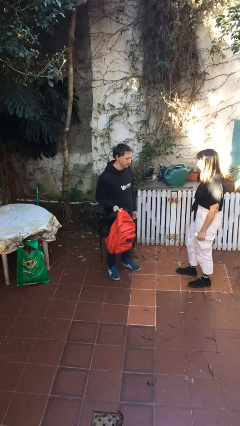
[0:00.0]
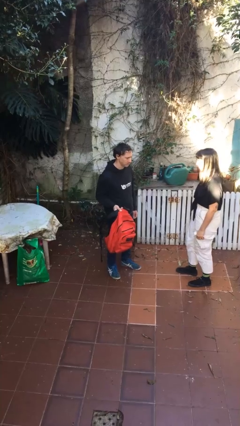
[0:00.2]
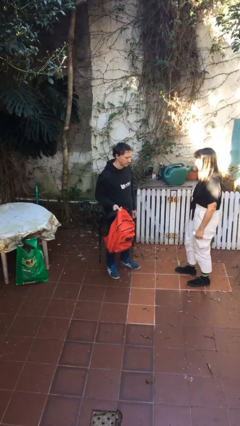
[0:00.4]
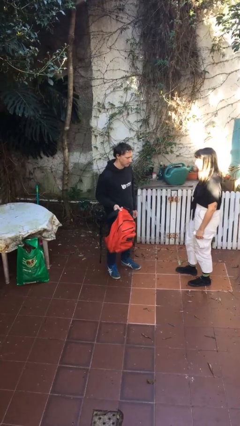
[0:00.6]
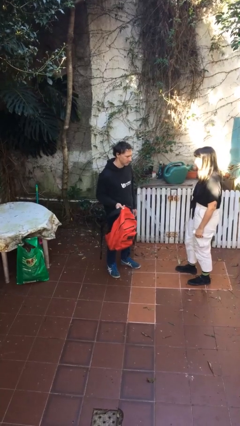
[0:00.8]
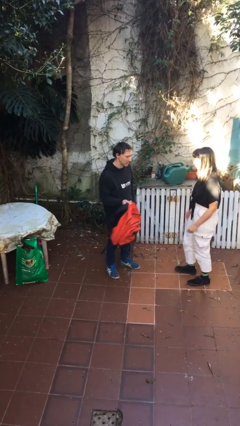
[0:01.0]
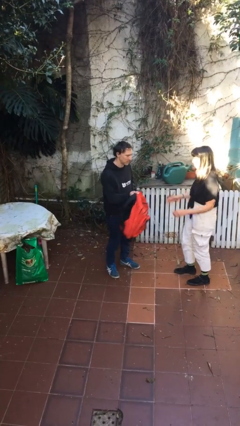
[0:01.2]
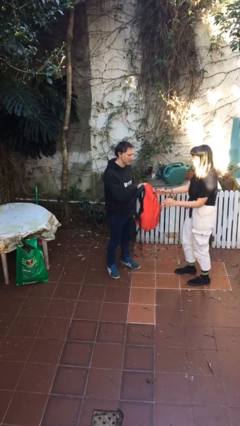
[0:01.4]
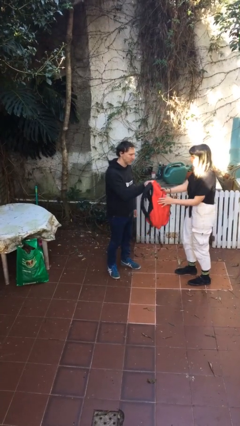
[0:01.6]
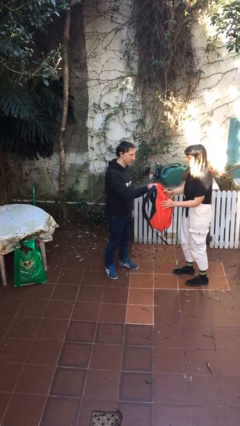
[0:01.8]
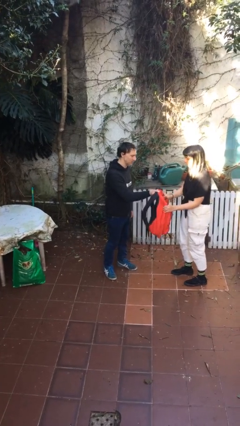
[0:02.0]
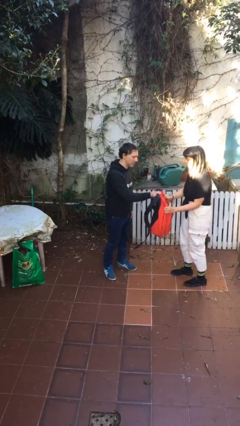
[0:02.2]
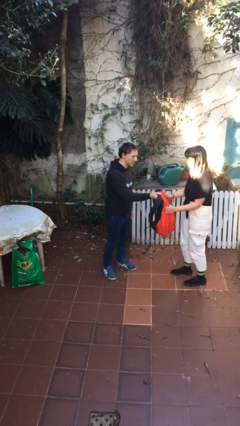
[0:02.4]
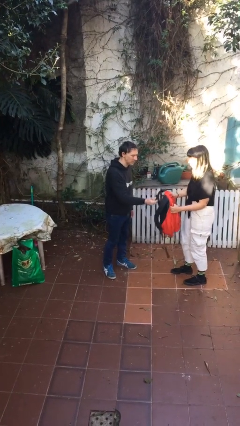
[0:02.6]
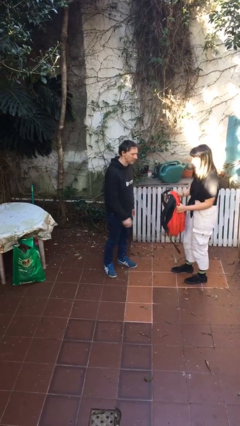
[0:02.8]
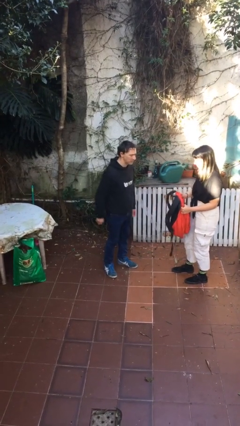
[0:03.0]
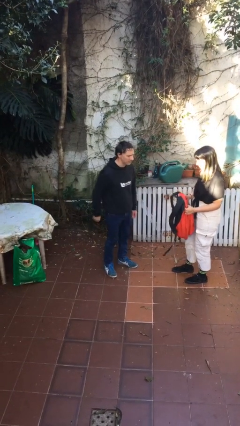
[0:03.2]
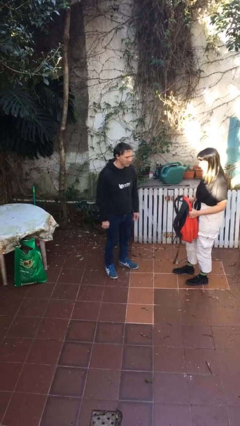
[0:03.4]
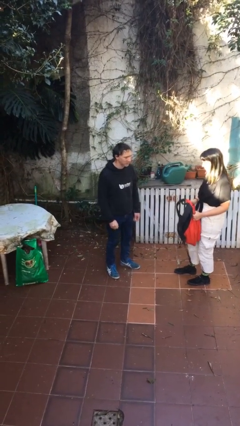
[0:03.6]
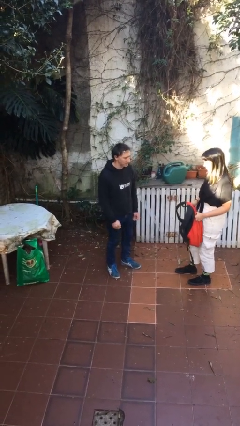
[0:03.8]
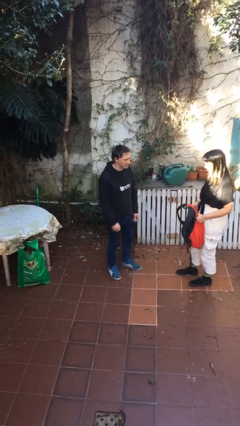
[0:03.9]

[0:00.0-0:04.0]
person transfers object to person

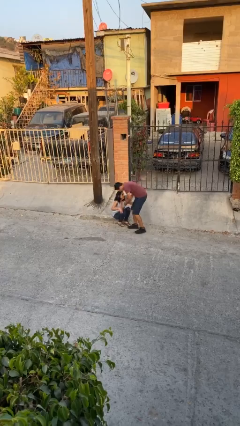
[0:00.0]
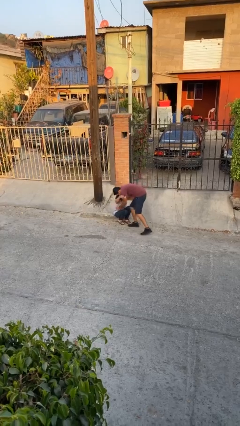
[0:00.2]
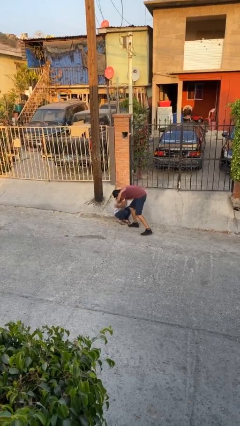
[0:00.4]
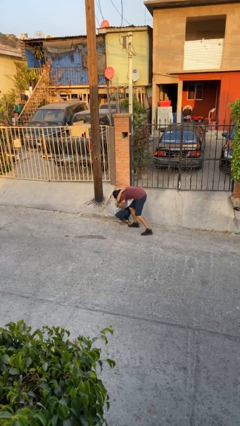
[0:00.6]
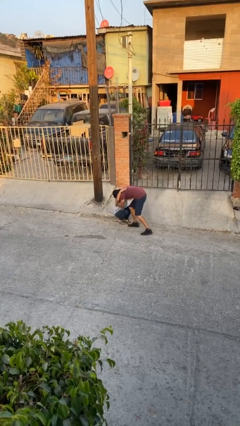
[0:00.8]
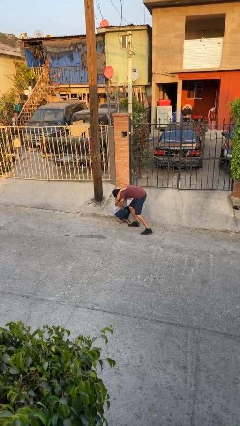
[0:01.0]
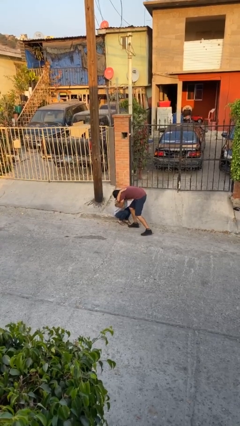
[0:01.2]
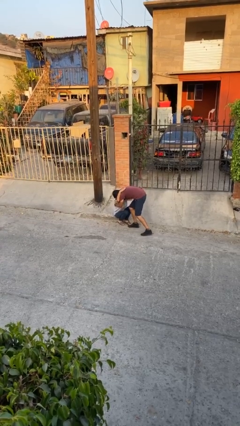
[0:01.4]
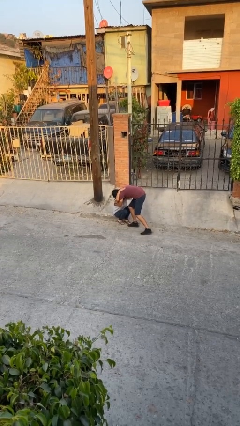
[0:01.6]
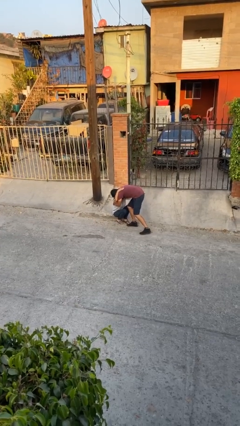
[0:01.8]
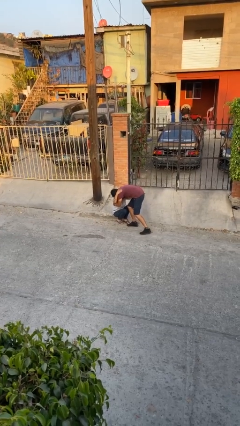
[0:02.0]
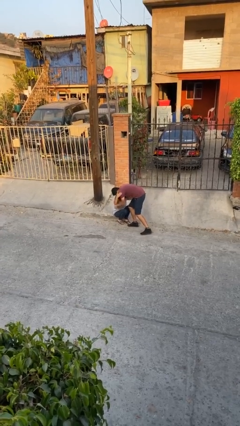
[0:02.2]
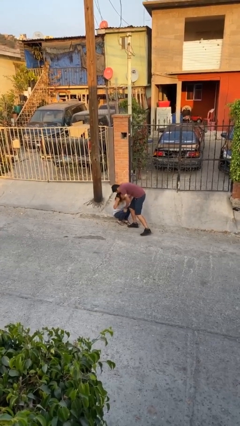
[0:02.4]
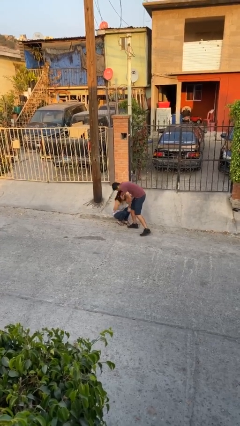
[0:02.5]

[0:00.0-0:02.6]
person embraces person

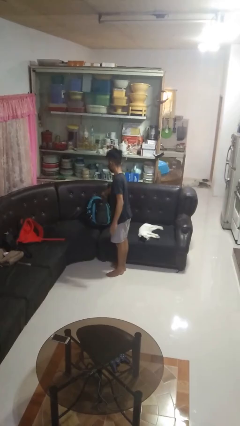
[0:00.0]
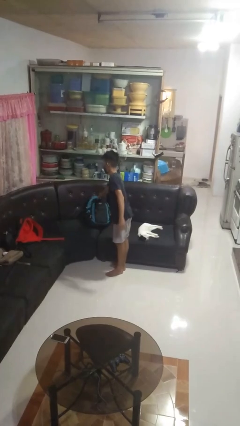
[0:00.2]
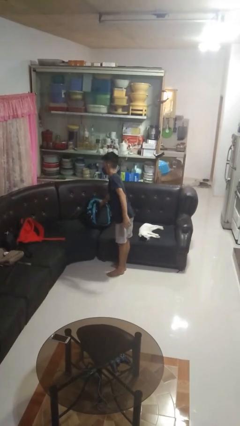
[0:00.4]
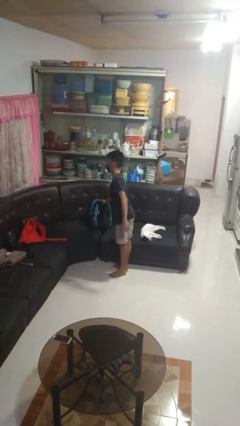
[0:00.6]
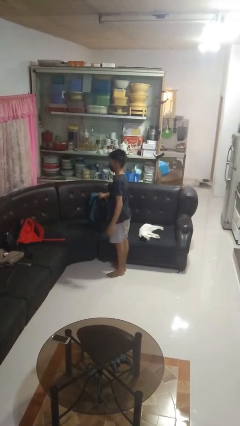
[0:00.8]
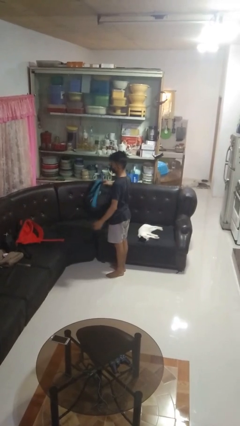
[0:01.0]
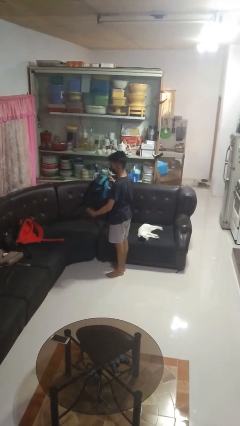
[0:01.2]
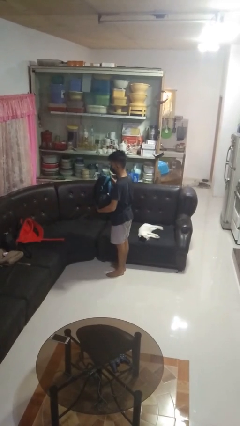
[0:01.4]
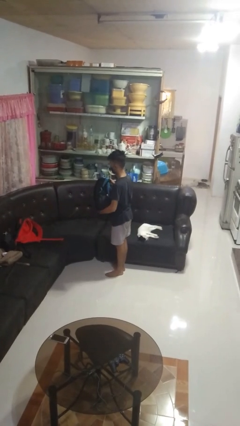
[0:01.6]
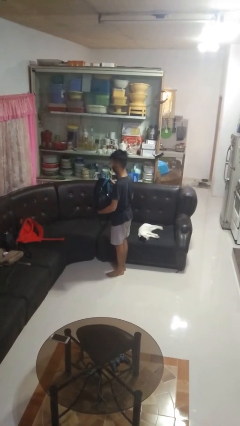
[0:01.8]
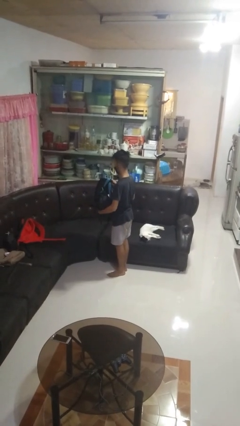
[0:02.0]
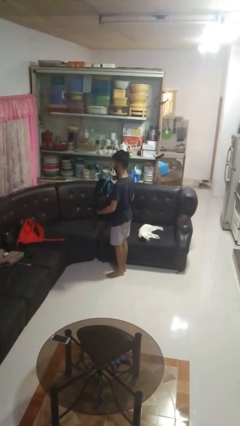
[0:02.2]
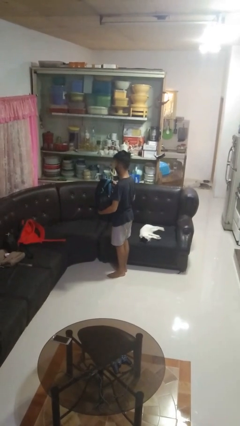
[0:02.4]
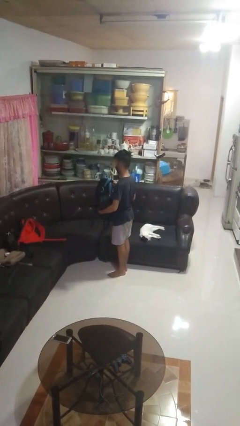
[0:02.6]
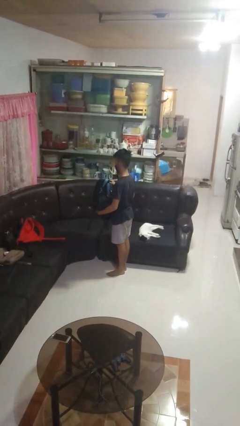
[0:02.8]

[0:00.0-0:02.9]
person picks up object from couch

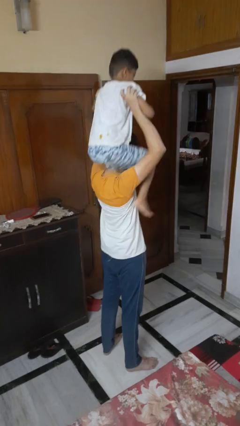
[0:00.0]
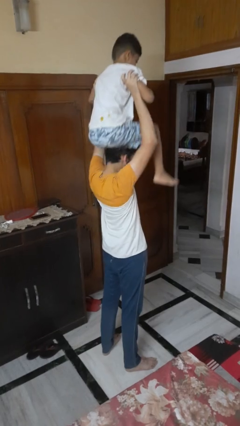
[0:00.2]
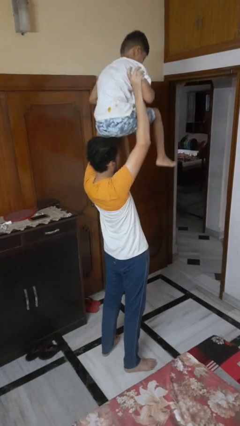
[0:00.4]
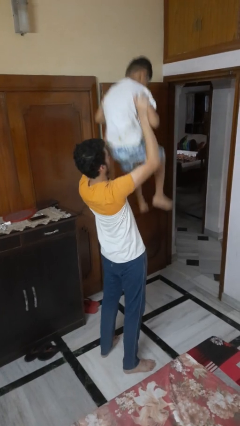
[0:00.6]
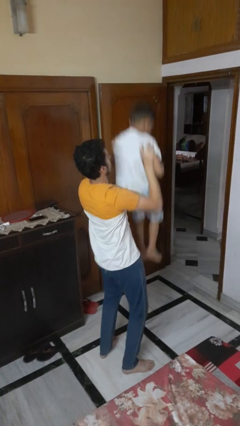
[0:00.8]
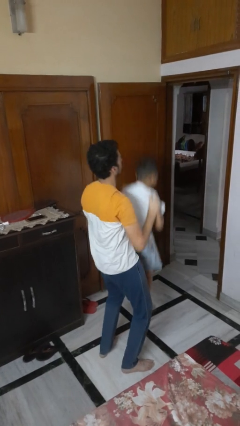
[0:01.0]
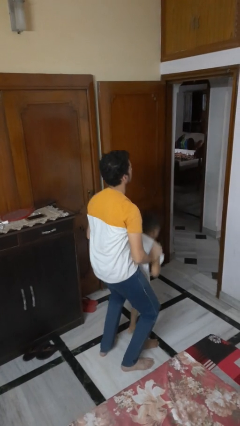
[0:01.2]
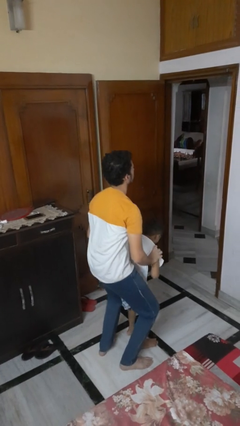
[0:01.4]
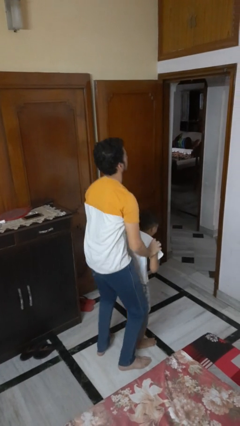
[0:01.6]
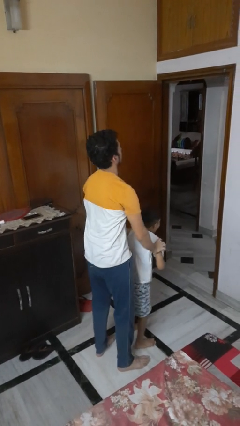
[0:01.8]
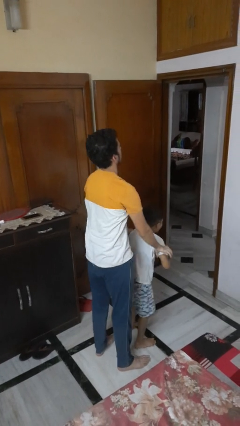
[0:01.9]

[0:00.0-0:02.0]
person puts down person

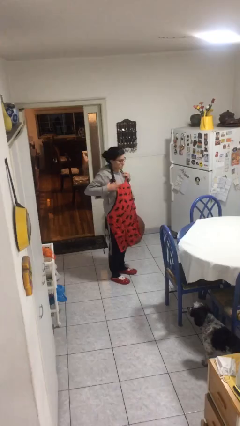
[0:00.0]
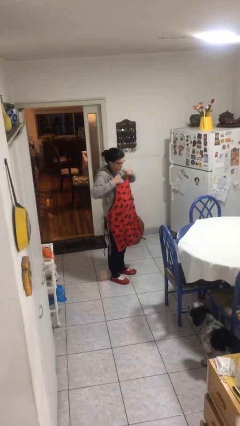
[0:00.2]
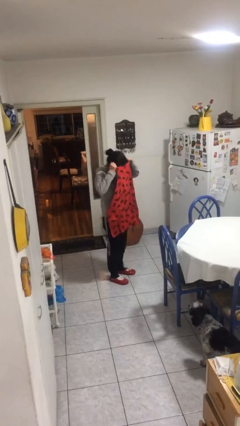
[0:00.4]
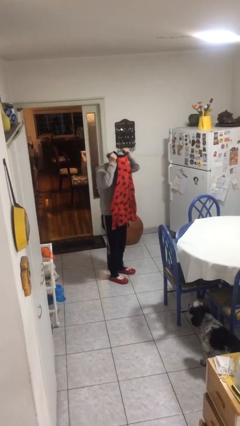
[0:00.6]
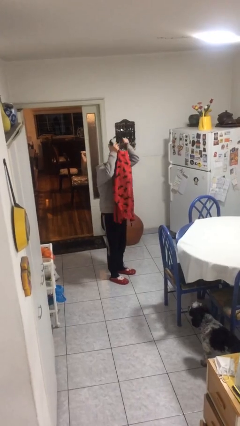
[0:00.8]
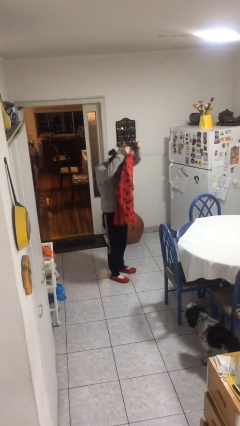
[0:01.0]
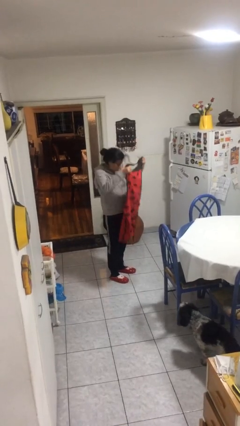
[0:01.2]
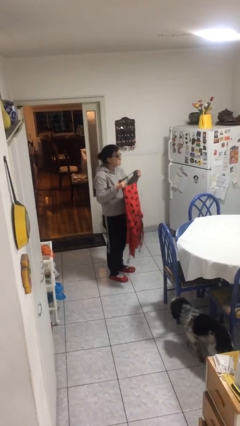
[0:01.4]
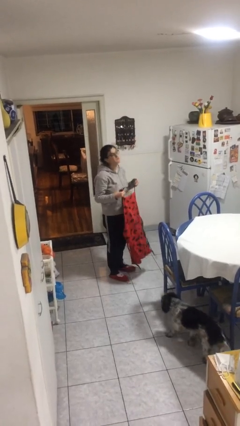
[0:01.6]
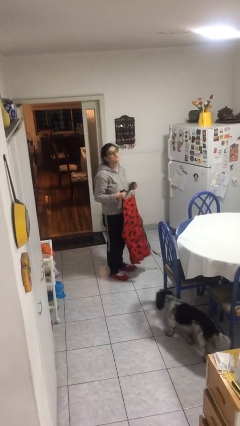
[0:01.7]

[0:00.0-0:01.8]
person takes off apron

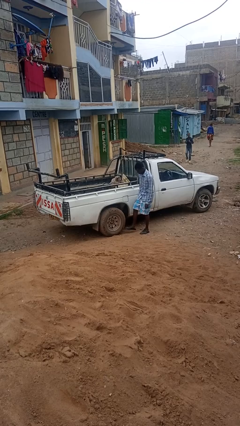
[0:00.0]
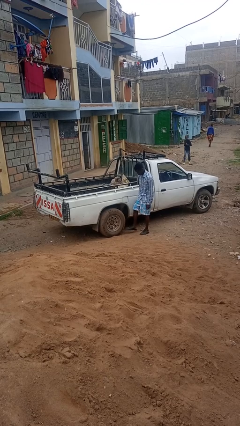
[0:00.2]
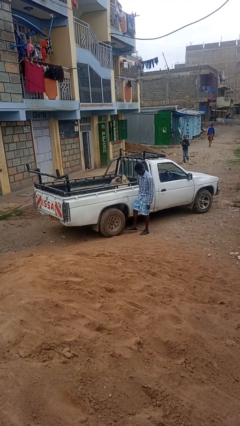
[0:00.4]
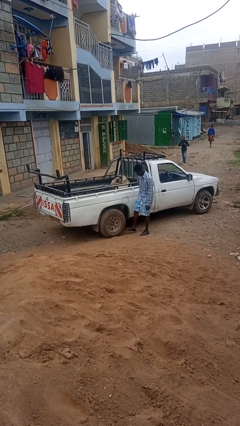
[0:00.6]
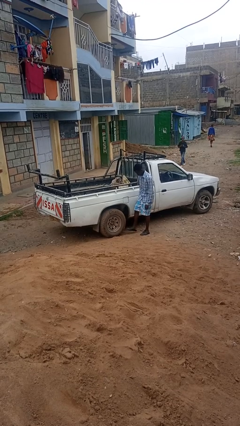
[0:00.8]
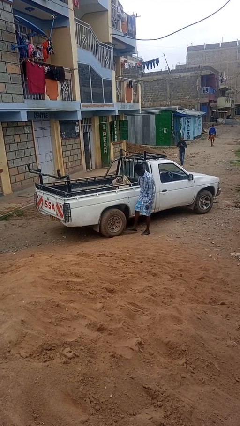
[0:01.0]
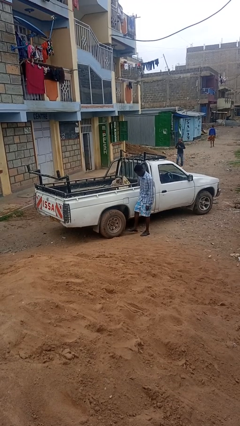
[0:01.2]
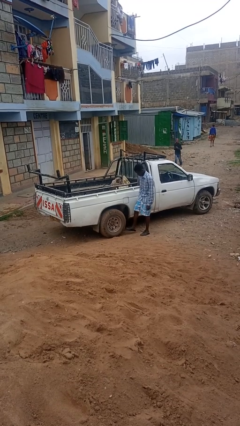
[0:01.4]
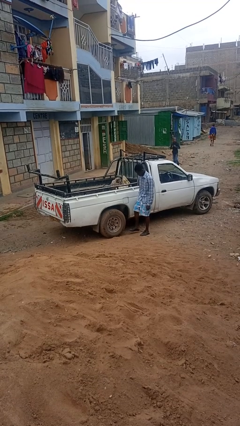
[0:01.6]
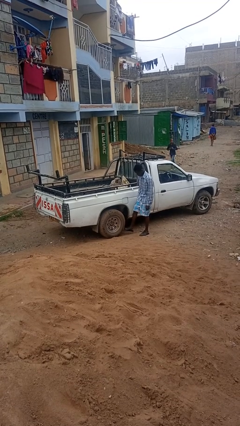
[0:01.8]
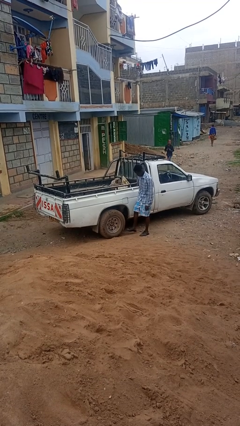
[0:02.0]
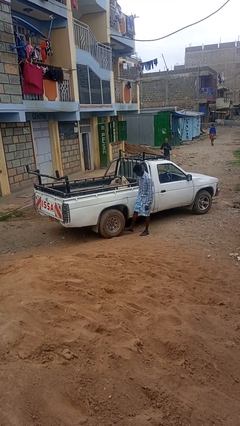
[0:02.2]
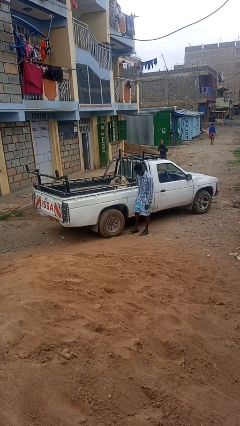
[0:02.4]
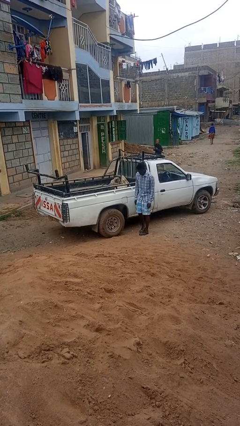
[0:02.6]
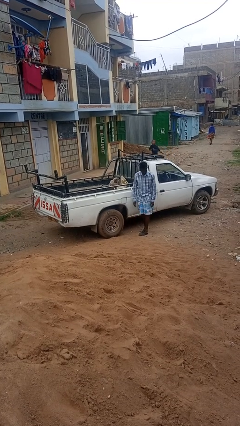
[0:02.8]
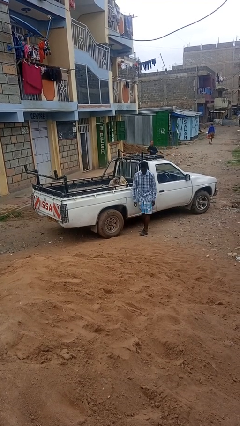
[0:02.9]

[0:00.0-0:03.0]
person kicks car tires

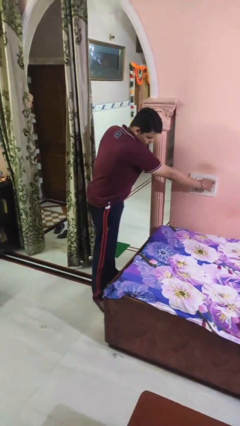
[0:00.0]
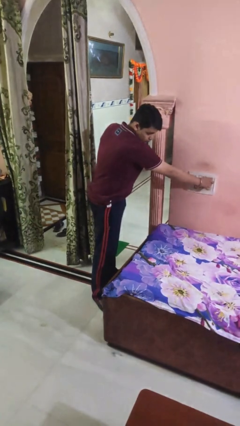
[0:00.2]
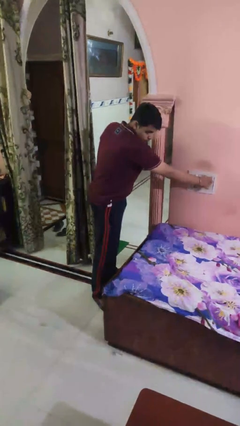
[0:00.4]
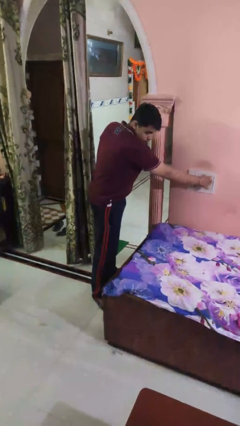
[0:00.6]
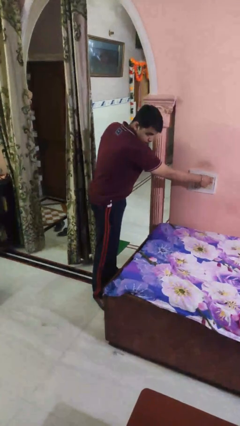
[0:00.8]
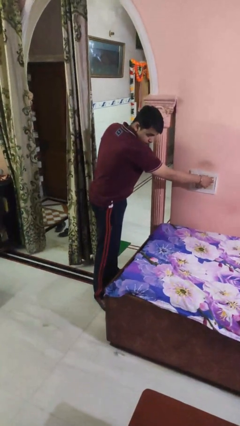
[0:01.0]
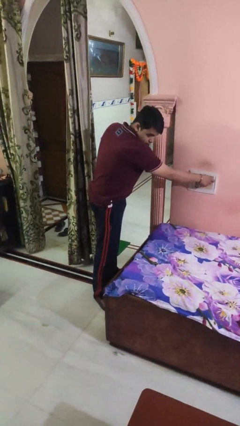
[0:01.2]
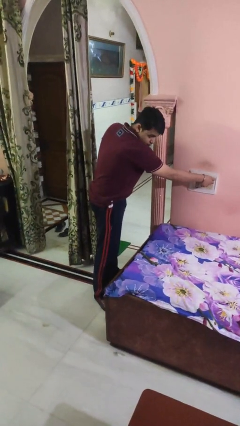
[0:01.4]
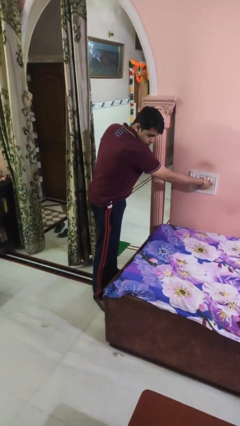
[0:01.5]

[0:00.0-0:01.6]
person adjusts thermostat
